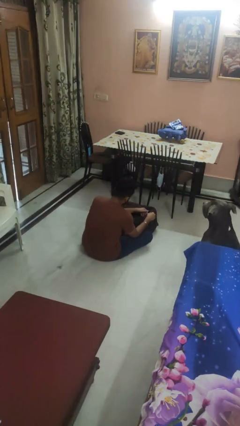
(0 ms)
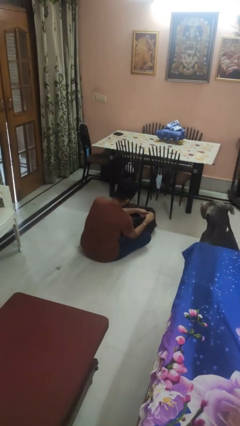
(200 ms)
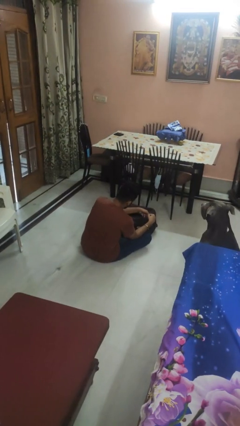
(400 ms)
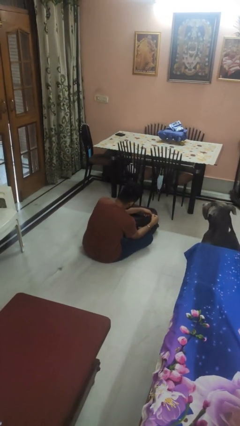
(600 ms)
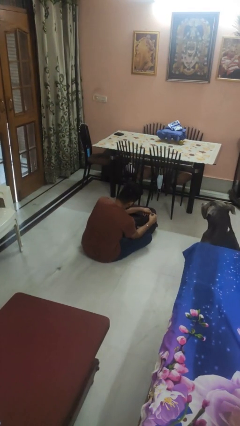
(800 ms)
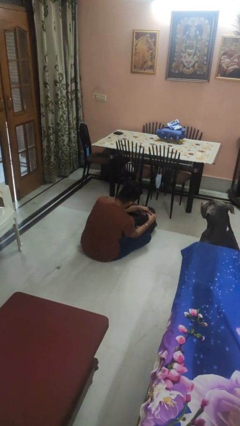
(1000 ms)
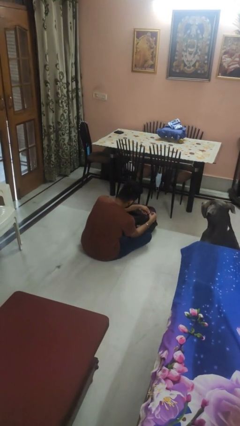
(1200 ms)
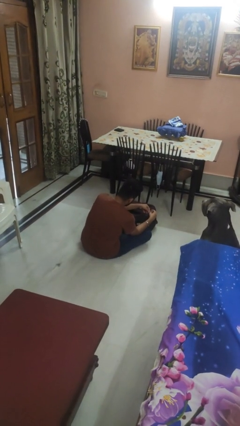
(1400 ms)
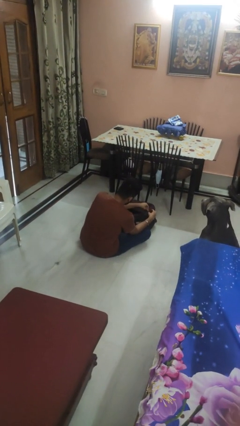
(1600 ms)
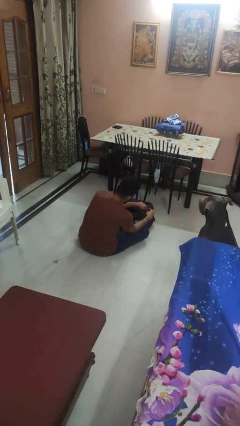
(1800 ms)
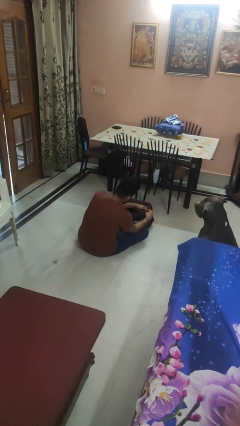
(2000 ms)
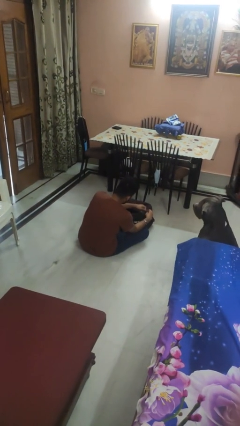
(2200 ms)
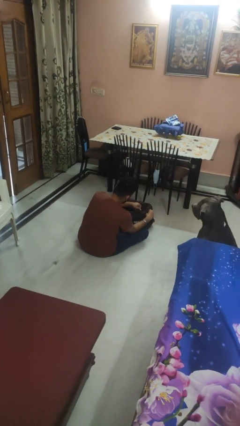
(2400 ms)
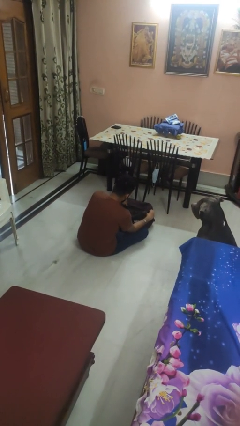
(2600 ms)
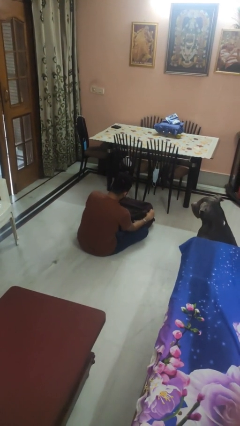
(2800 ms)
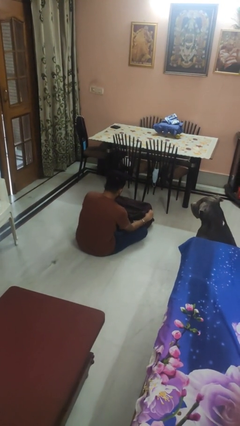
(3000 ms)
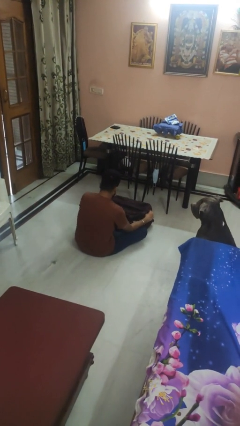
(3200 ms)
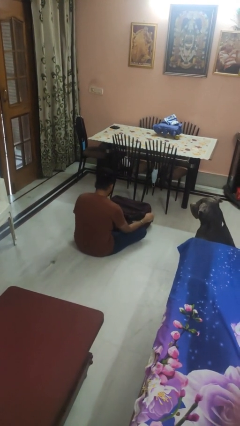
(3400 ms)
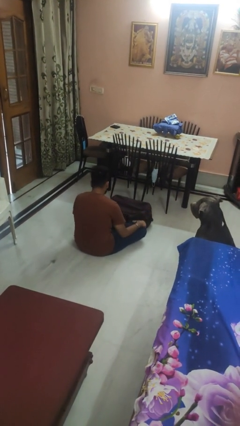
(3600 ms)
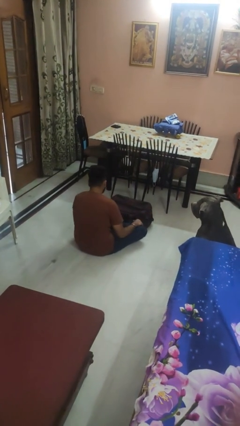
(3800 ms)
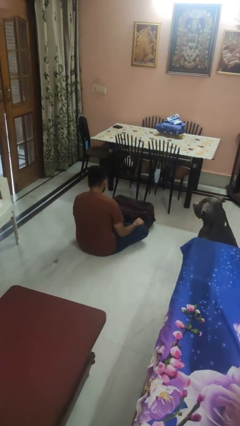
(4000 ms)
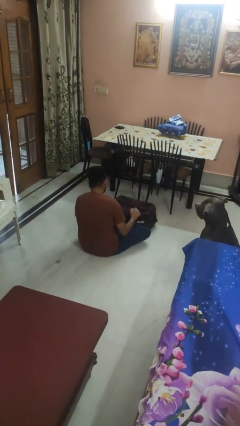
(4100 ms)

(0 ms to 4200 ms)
person closes suitcase

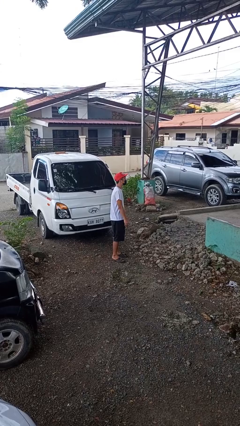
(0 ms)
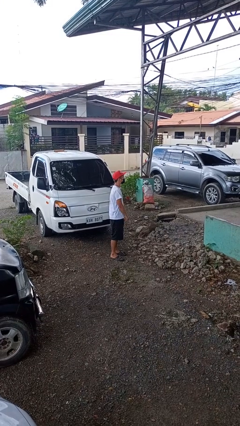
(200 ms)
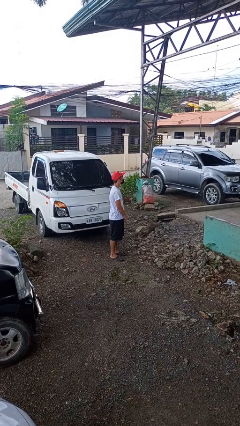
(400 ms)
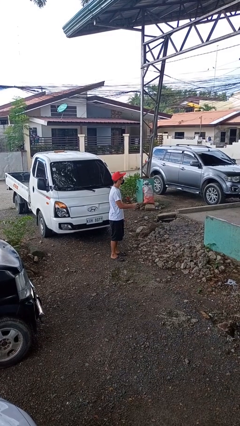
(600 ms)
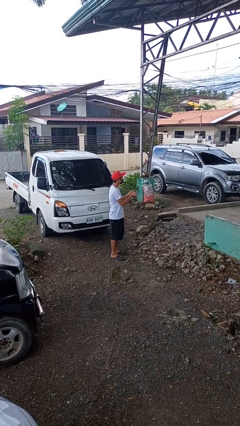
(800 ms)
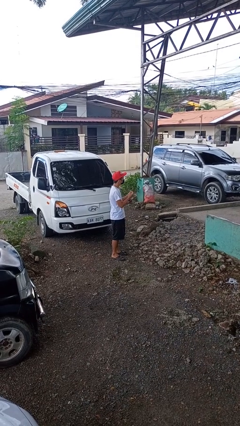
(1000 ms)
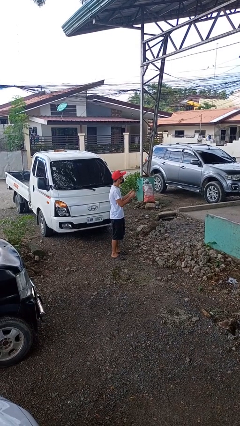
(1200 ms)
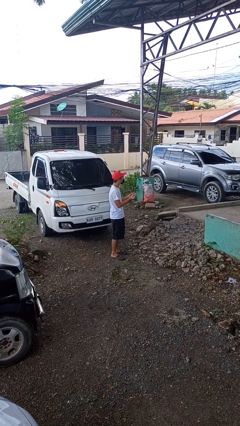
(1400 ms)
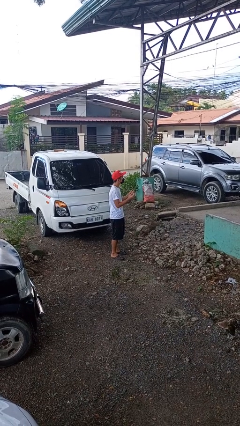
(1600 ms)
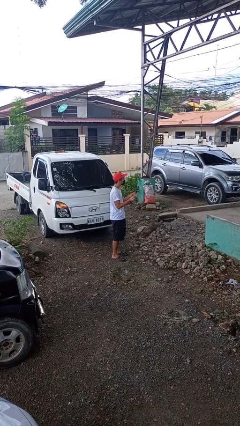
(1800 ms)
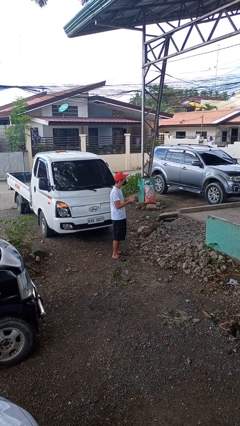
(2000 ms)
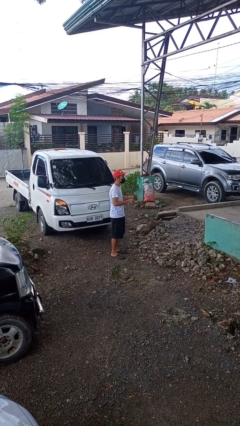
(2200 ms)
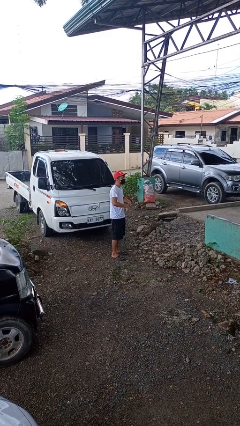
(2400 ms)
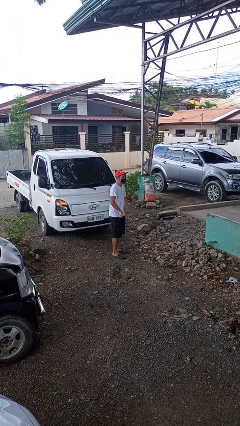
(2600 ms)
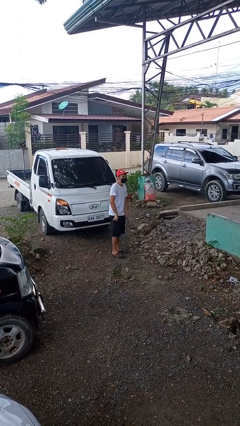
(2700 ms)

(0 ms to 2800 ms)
person snaps fingers

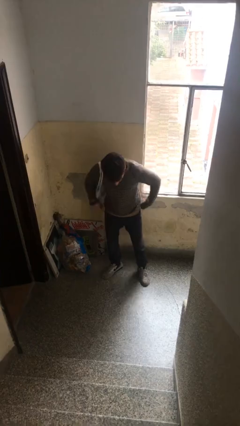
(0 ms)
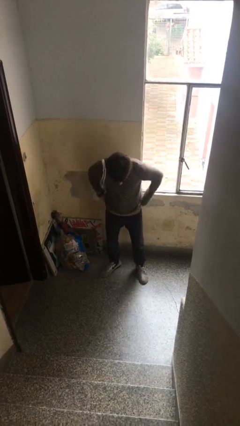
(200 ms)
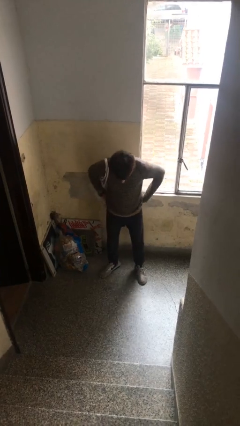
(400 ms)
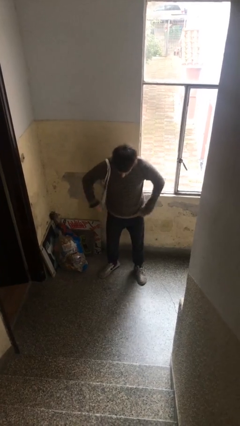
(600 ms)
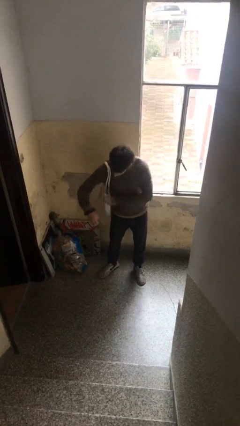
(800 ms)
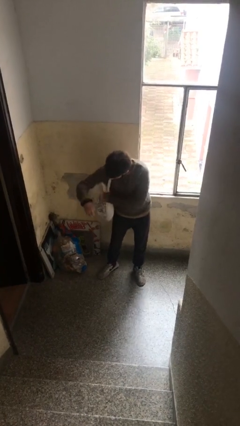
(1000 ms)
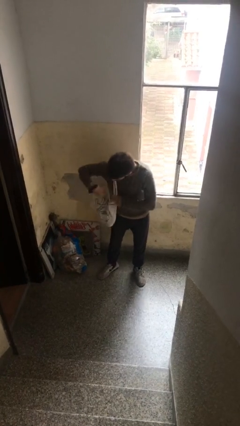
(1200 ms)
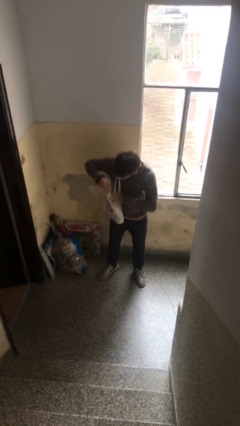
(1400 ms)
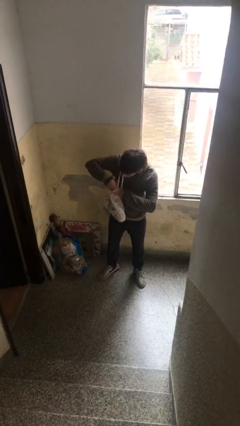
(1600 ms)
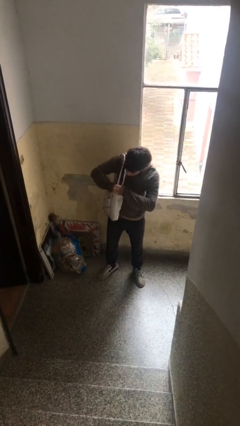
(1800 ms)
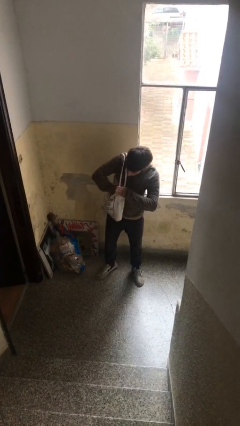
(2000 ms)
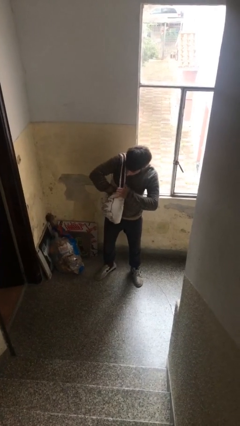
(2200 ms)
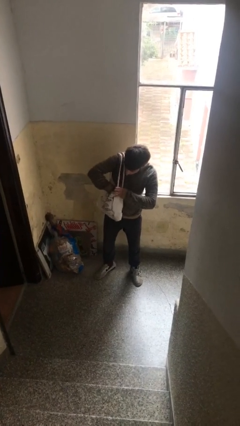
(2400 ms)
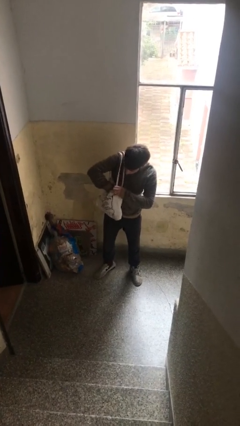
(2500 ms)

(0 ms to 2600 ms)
person searches in purse

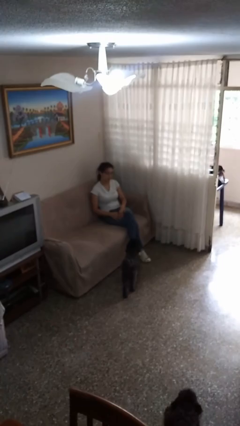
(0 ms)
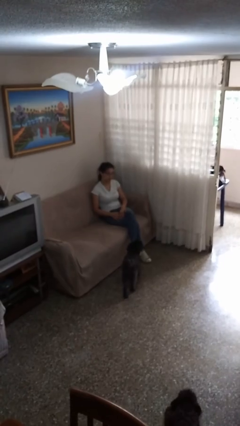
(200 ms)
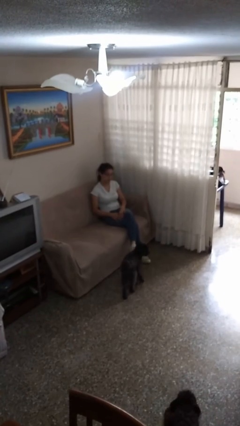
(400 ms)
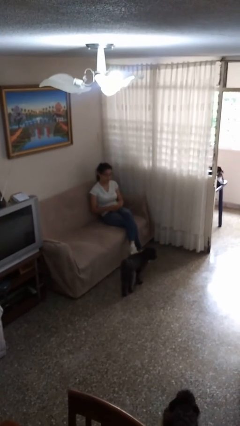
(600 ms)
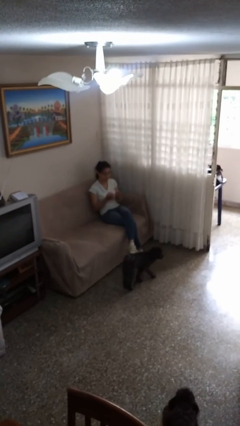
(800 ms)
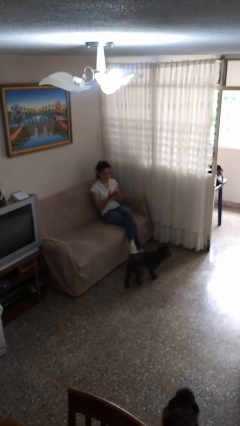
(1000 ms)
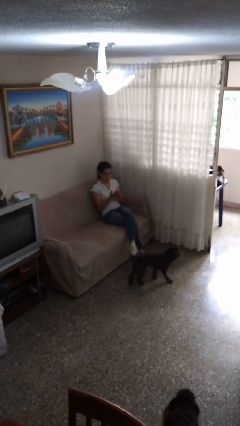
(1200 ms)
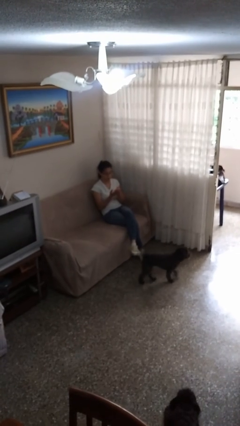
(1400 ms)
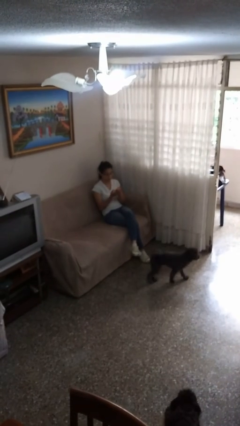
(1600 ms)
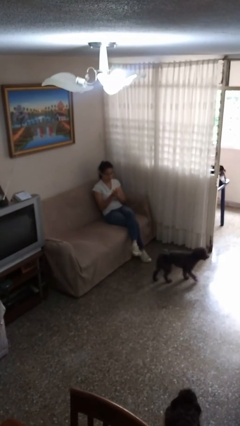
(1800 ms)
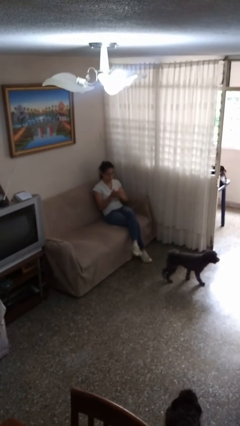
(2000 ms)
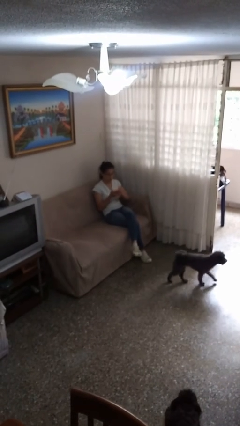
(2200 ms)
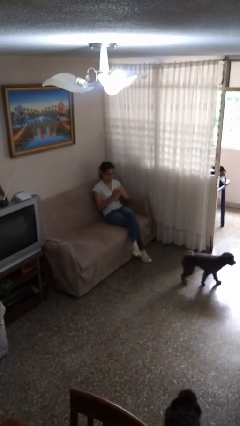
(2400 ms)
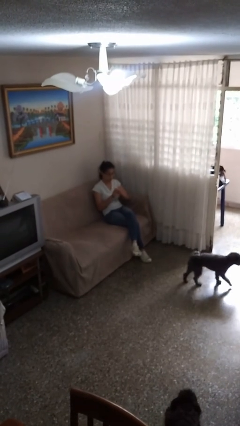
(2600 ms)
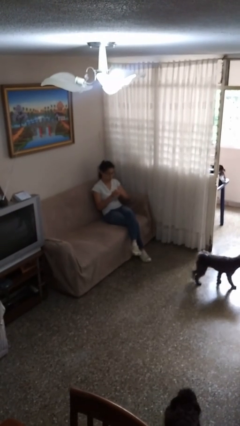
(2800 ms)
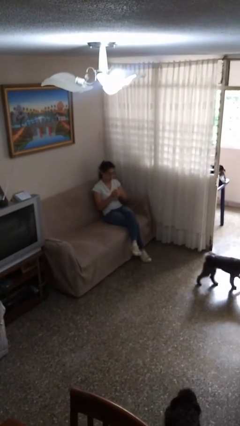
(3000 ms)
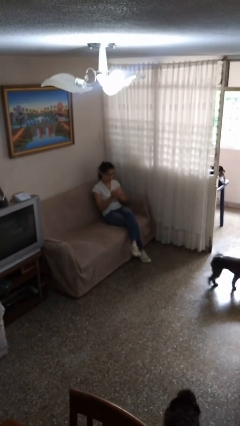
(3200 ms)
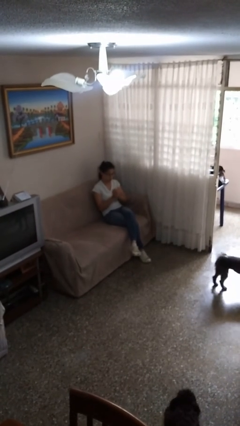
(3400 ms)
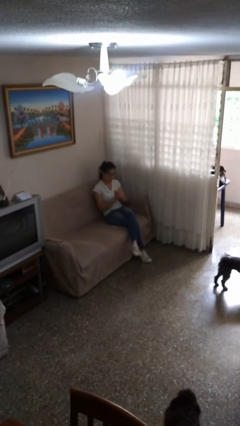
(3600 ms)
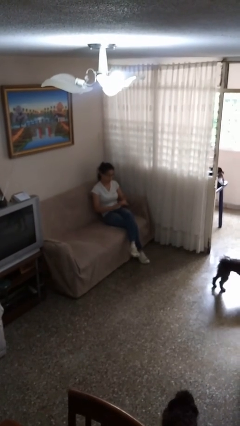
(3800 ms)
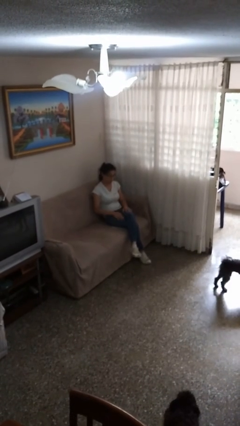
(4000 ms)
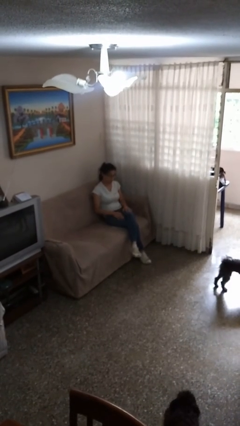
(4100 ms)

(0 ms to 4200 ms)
person looks at hands in lap

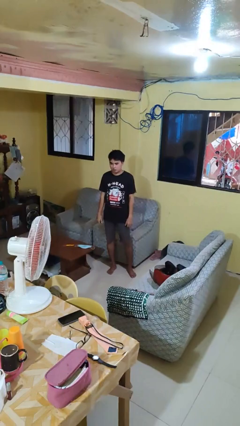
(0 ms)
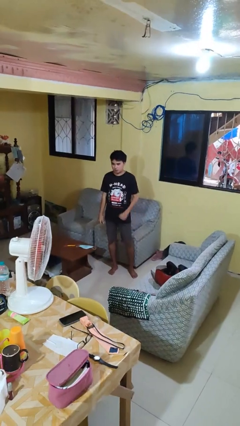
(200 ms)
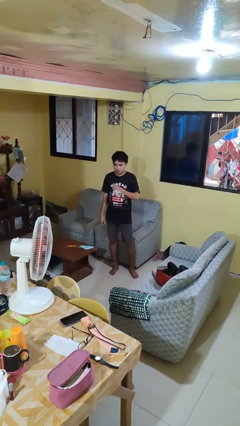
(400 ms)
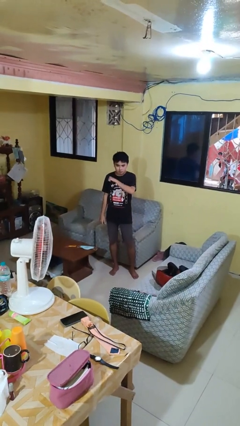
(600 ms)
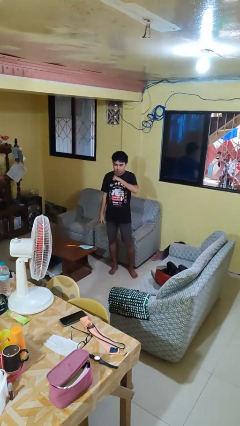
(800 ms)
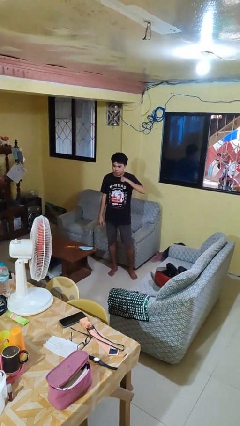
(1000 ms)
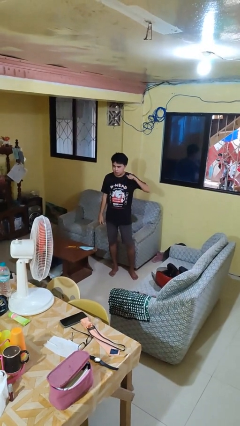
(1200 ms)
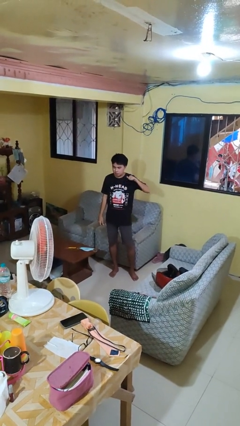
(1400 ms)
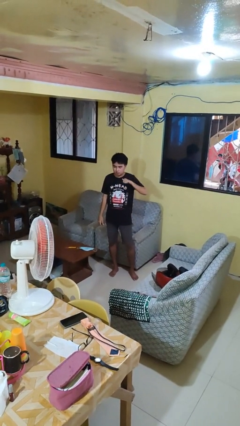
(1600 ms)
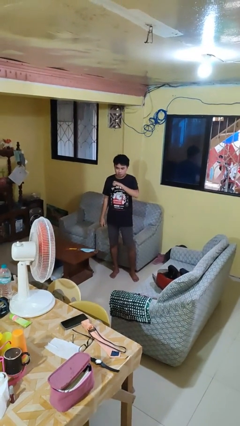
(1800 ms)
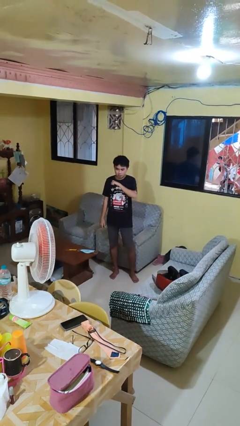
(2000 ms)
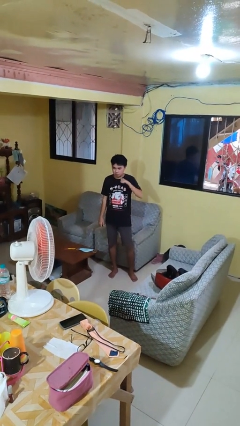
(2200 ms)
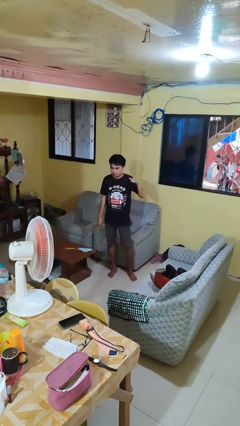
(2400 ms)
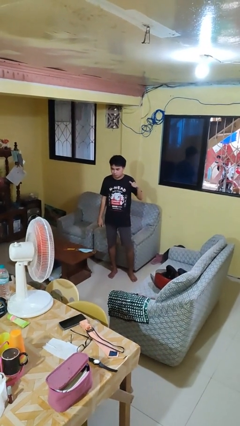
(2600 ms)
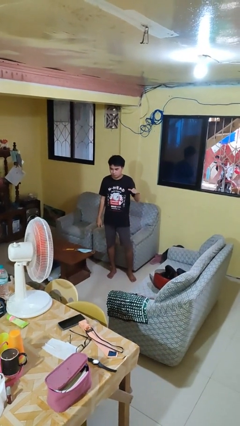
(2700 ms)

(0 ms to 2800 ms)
person gestures cut

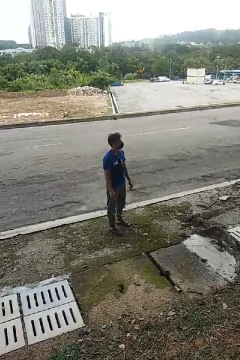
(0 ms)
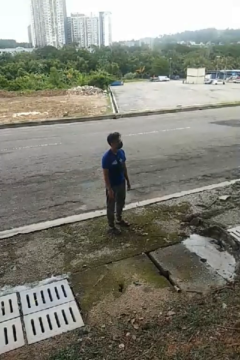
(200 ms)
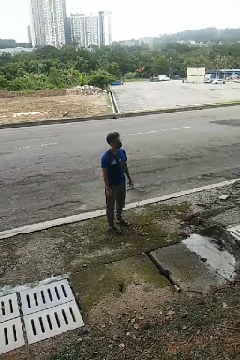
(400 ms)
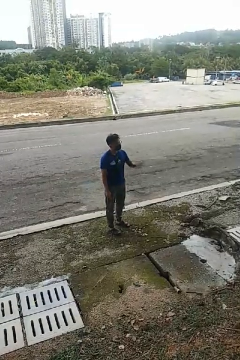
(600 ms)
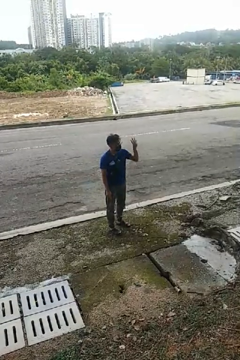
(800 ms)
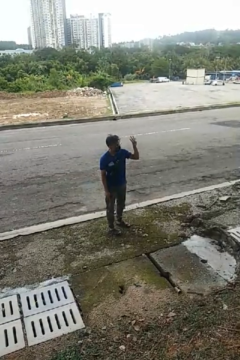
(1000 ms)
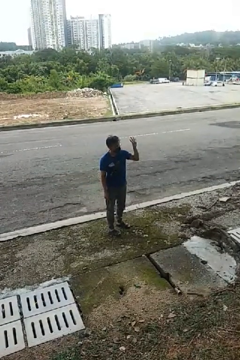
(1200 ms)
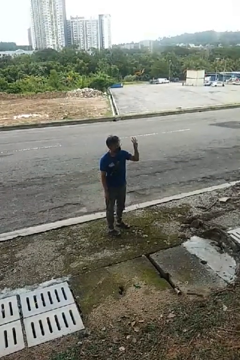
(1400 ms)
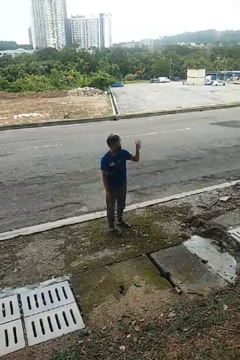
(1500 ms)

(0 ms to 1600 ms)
person gestures number four
